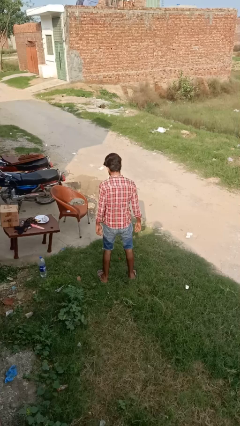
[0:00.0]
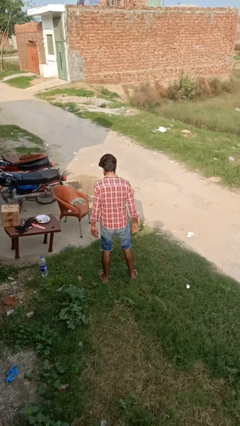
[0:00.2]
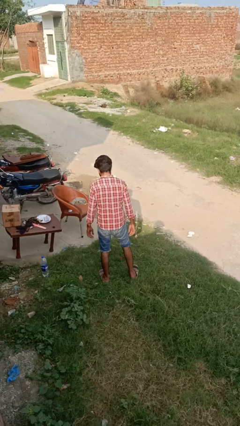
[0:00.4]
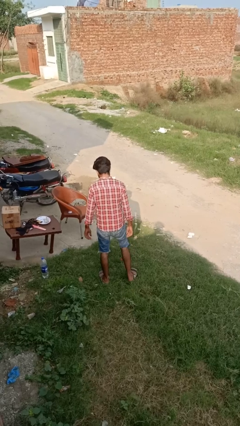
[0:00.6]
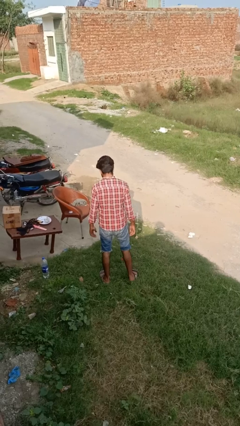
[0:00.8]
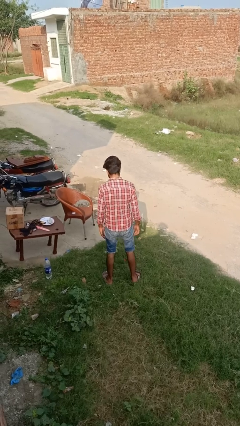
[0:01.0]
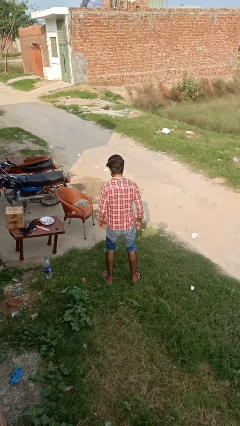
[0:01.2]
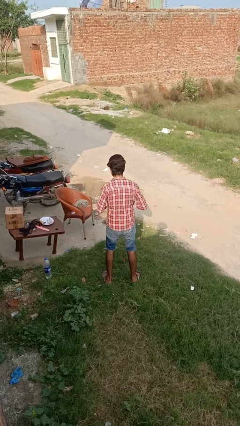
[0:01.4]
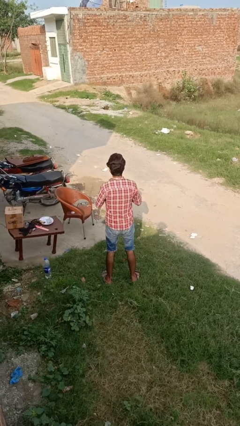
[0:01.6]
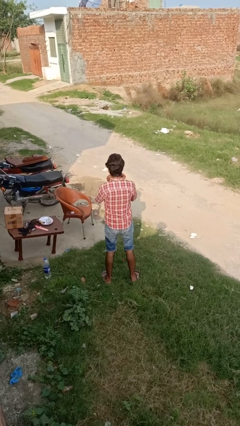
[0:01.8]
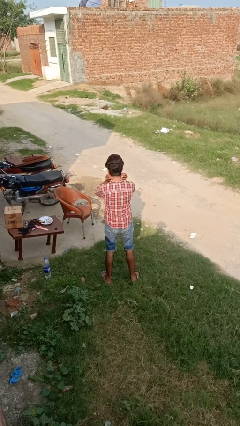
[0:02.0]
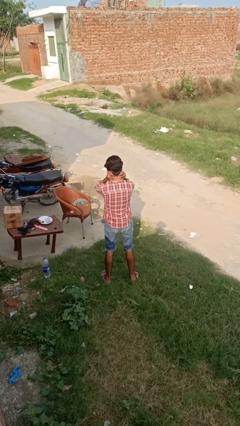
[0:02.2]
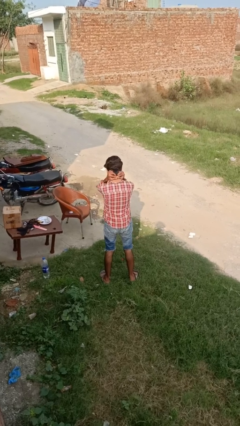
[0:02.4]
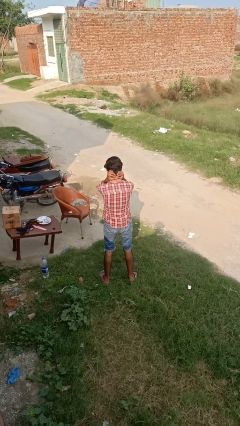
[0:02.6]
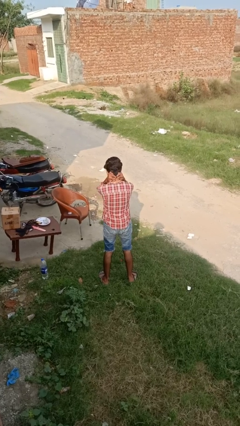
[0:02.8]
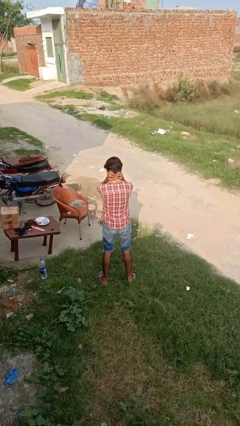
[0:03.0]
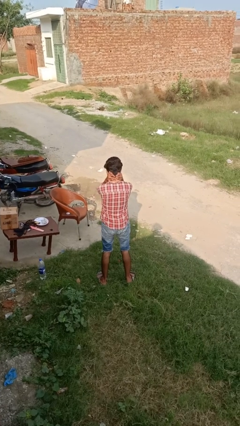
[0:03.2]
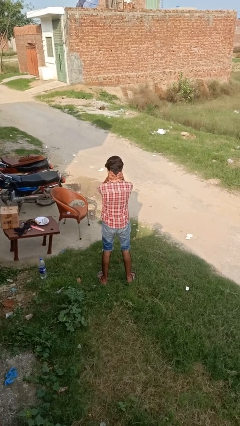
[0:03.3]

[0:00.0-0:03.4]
person puts on necklace

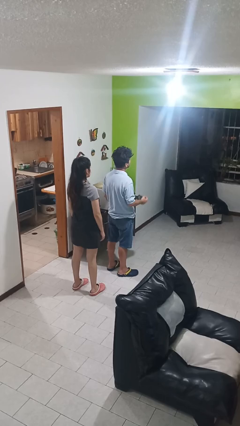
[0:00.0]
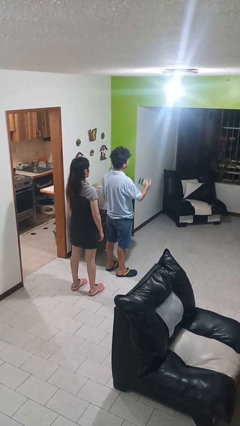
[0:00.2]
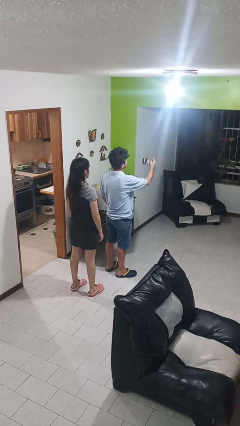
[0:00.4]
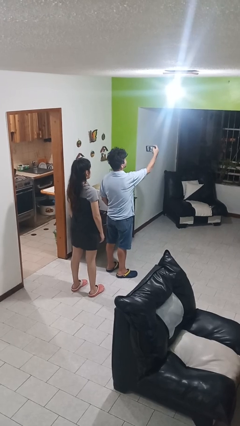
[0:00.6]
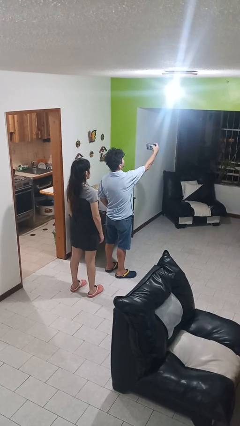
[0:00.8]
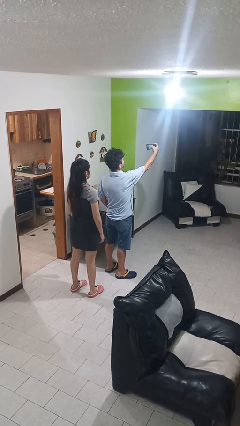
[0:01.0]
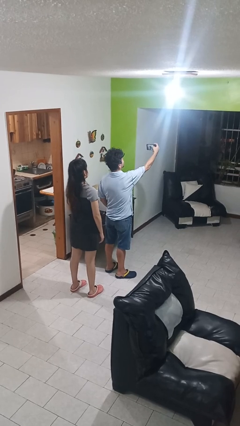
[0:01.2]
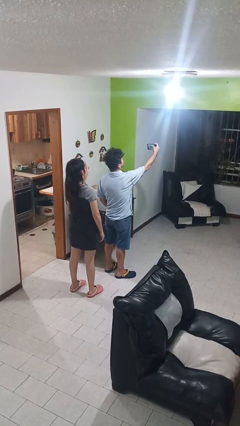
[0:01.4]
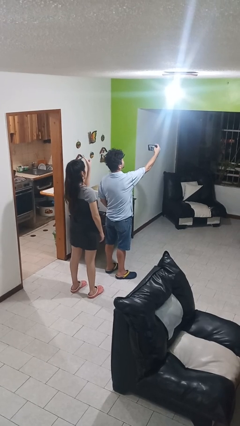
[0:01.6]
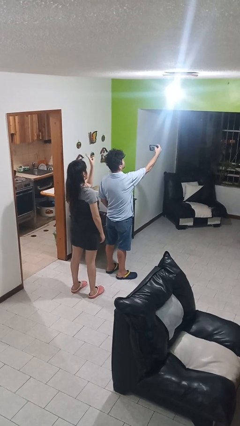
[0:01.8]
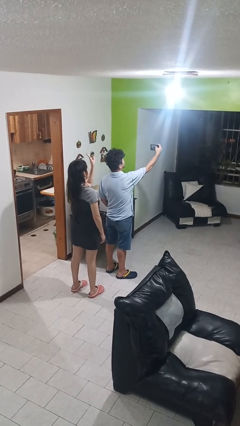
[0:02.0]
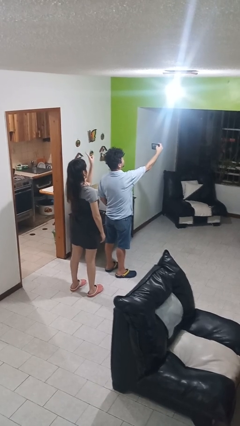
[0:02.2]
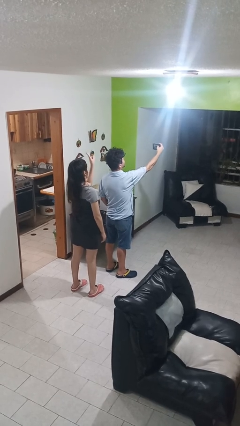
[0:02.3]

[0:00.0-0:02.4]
person takes selfie with person

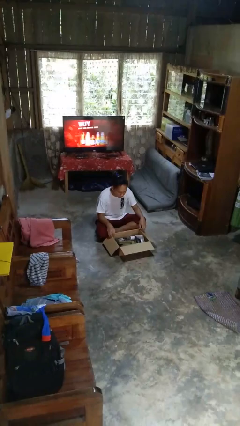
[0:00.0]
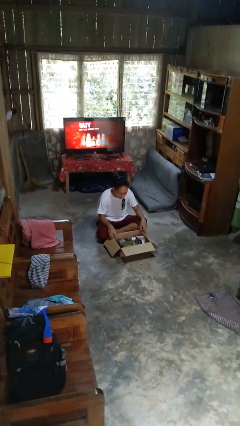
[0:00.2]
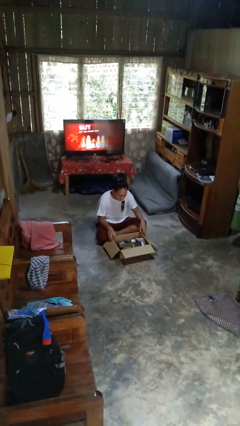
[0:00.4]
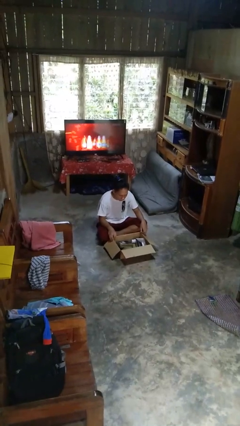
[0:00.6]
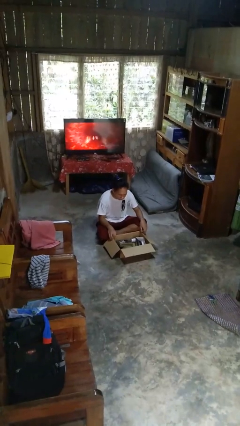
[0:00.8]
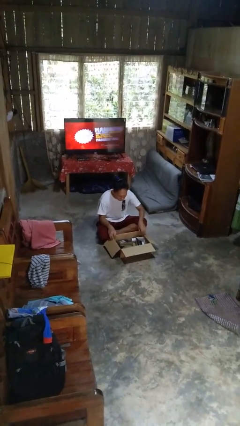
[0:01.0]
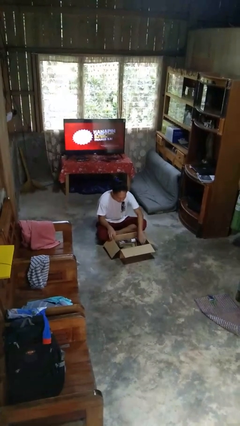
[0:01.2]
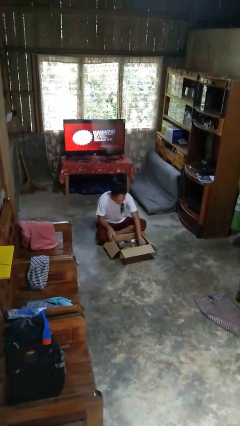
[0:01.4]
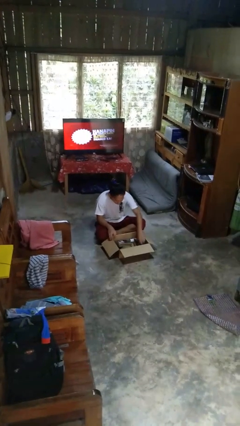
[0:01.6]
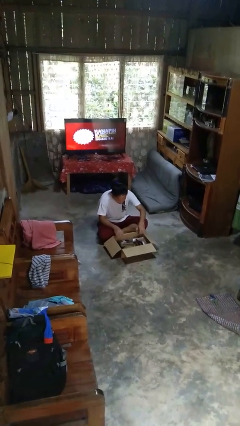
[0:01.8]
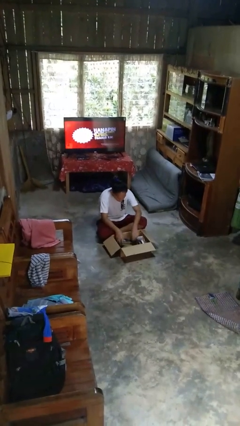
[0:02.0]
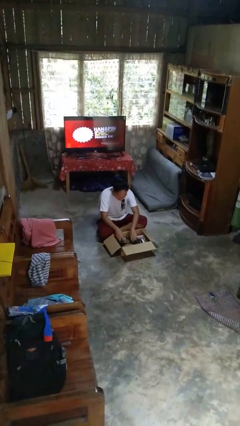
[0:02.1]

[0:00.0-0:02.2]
person searches in box

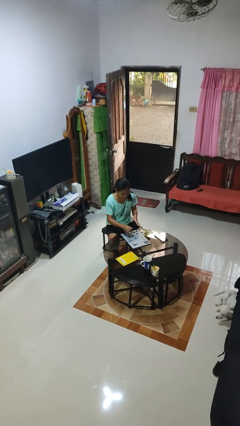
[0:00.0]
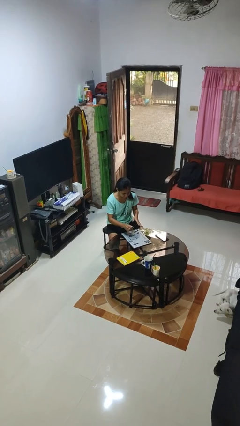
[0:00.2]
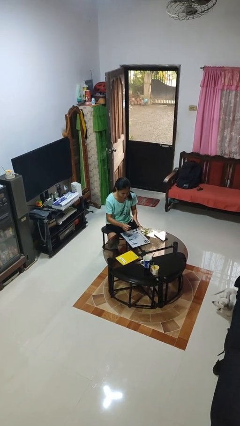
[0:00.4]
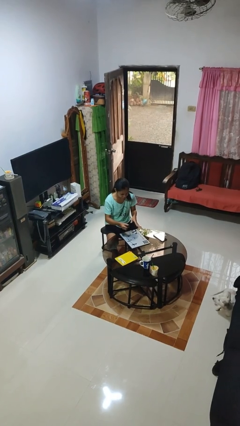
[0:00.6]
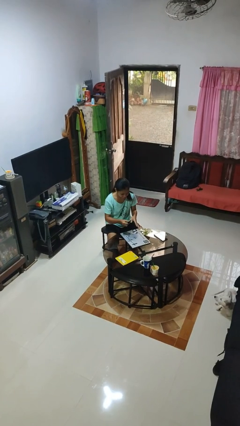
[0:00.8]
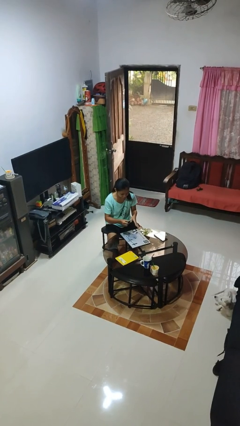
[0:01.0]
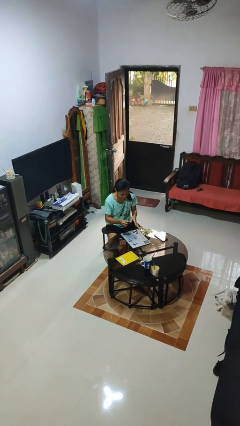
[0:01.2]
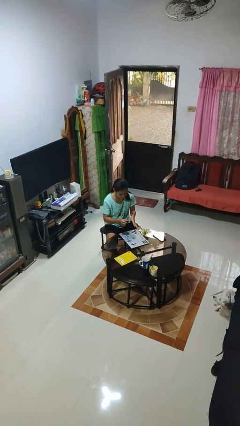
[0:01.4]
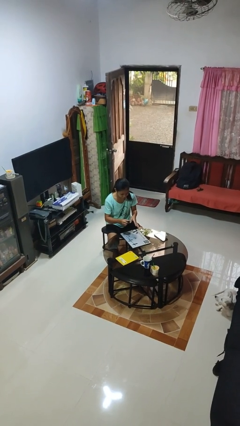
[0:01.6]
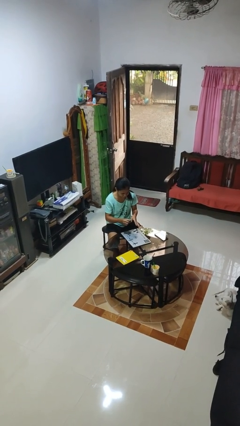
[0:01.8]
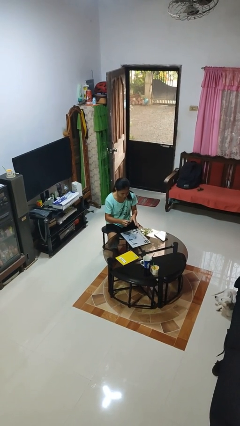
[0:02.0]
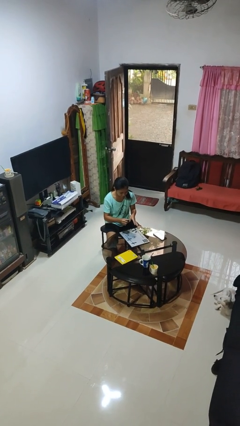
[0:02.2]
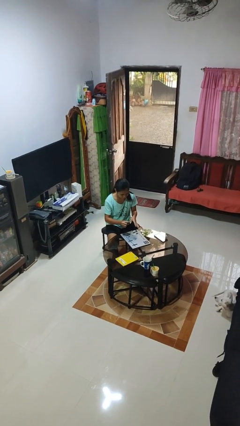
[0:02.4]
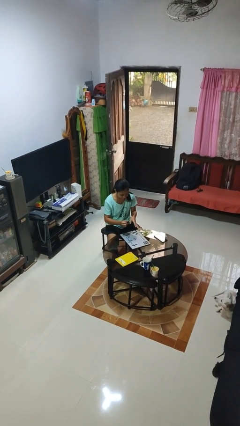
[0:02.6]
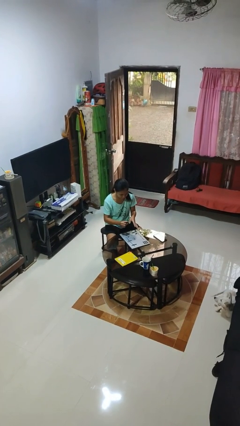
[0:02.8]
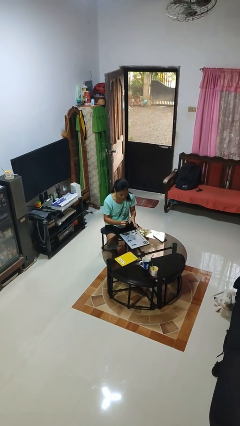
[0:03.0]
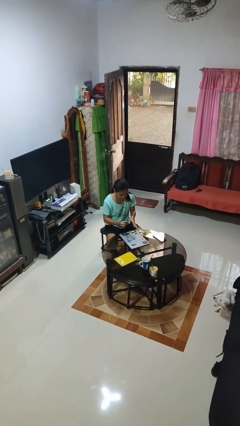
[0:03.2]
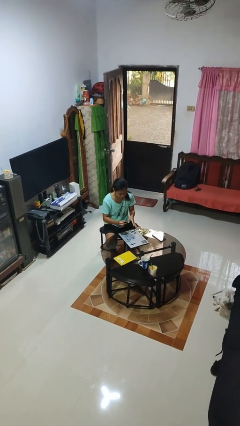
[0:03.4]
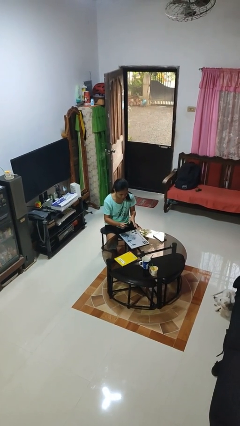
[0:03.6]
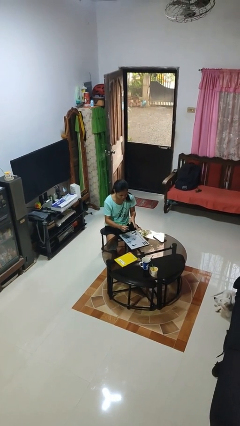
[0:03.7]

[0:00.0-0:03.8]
person paints fingernails

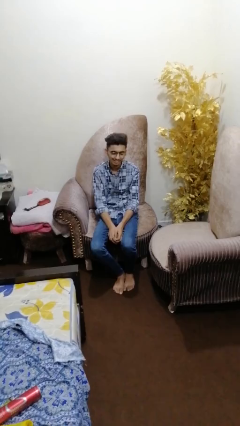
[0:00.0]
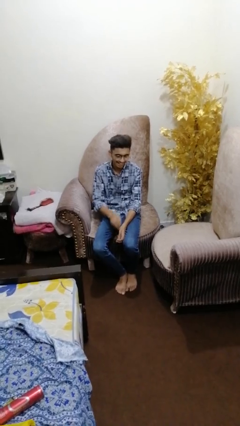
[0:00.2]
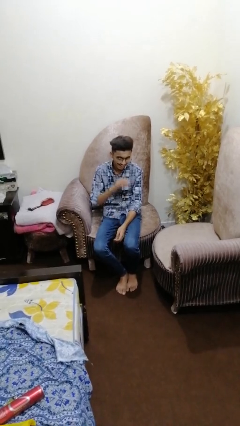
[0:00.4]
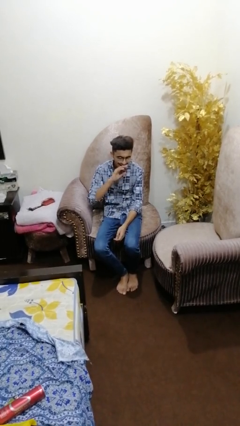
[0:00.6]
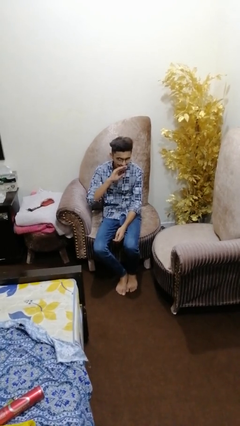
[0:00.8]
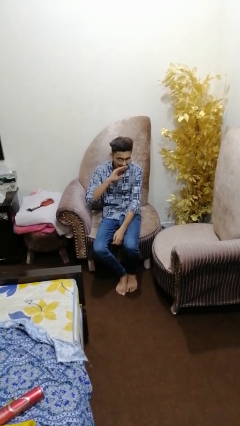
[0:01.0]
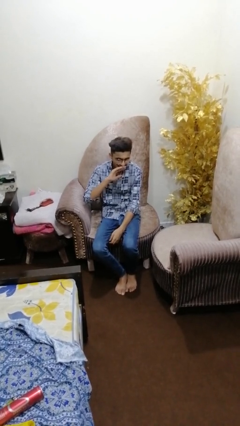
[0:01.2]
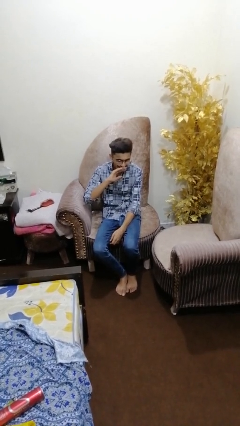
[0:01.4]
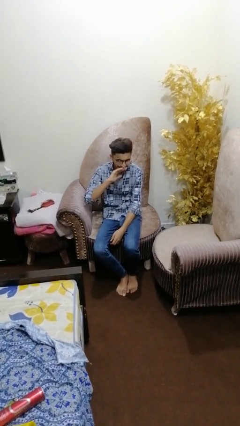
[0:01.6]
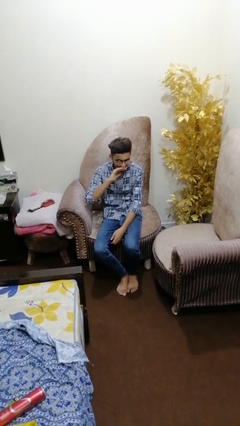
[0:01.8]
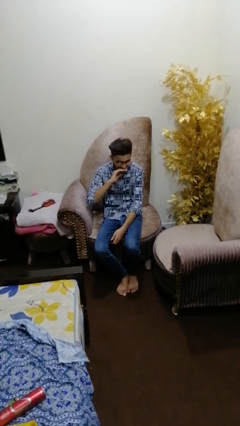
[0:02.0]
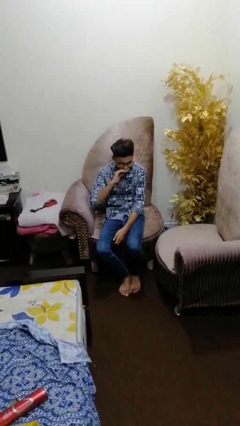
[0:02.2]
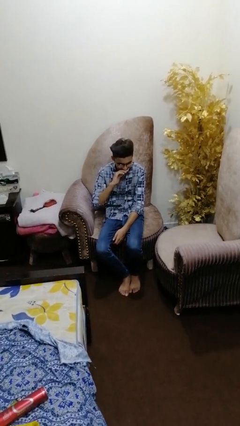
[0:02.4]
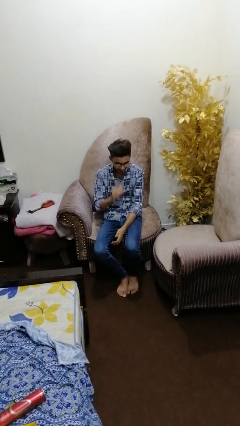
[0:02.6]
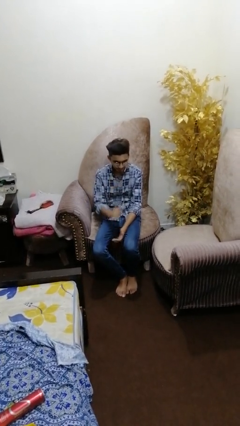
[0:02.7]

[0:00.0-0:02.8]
person yawns

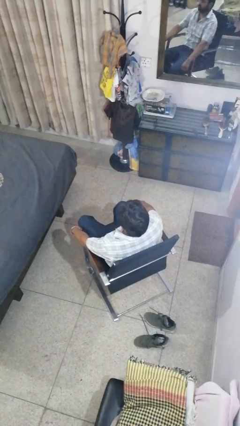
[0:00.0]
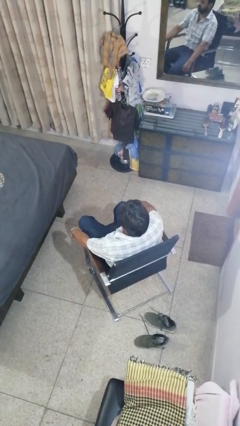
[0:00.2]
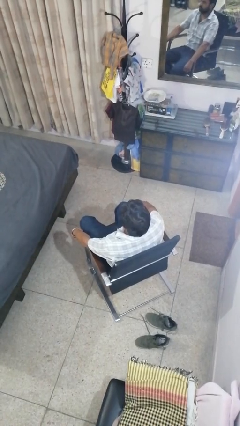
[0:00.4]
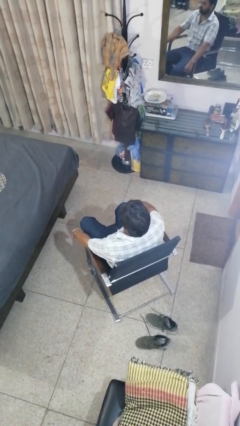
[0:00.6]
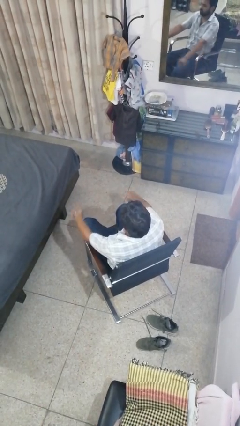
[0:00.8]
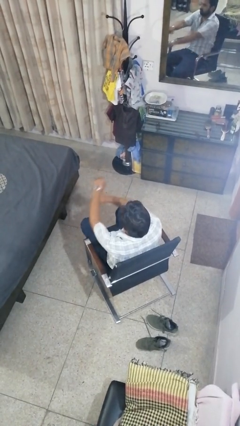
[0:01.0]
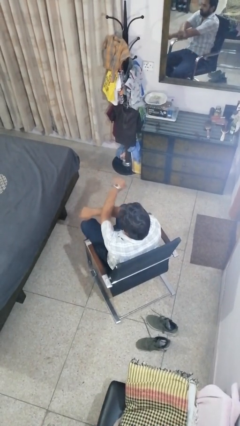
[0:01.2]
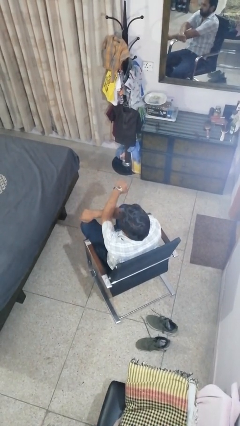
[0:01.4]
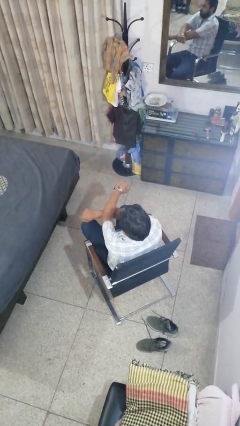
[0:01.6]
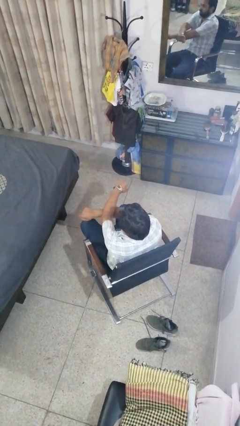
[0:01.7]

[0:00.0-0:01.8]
person gestures arms x

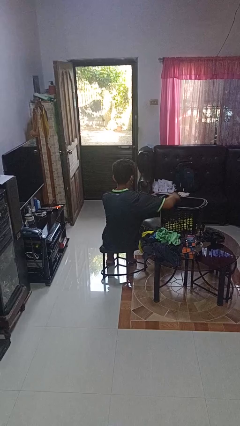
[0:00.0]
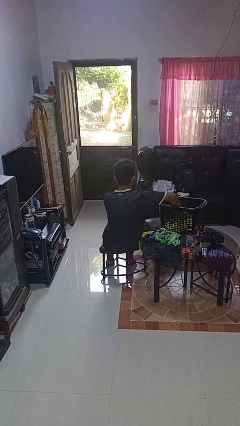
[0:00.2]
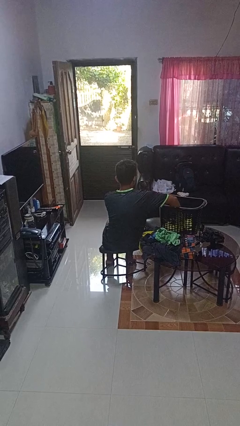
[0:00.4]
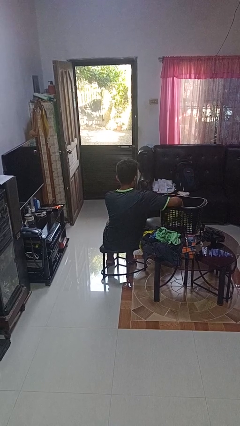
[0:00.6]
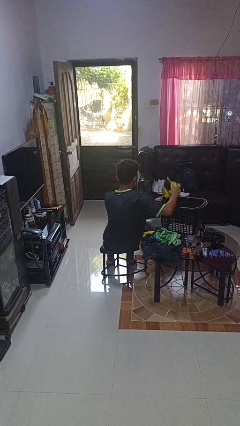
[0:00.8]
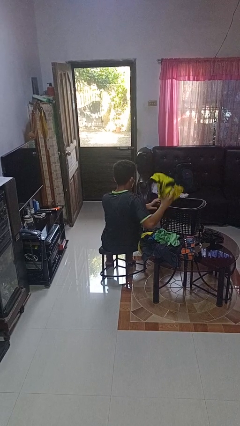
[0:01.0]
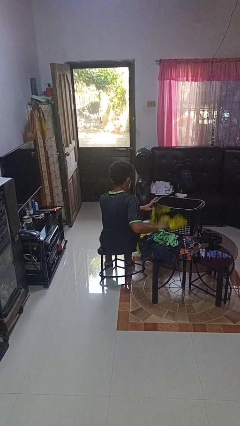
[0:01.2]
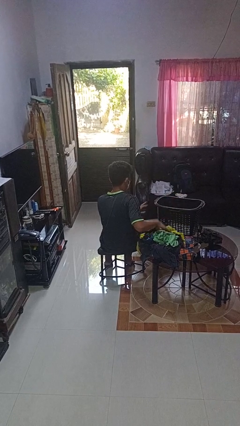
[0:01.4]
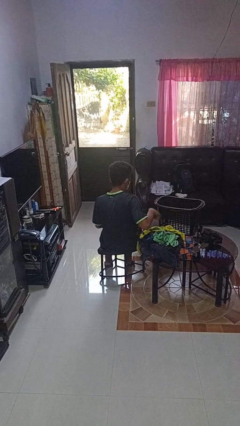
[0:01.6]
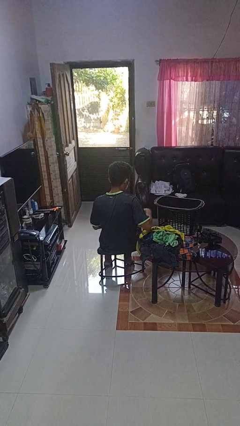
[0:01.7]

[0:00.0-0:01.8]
person takes object from basket
